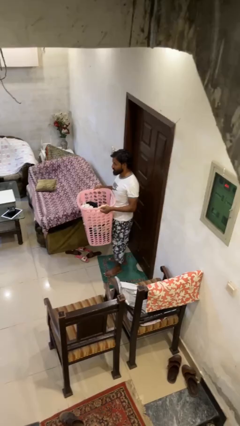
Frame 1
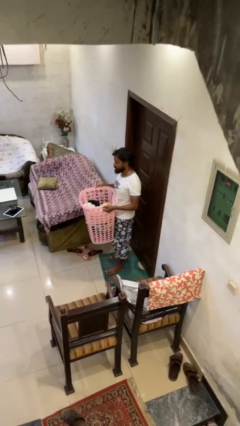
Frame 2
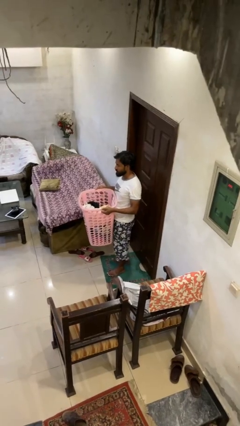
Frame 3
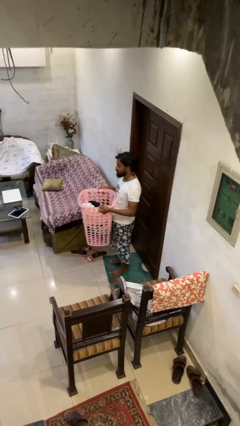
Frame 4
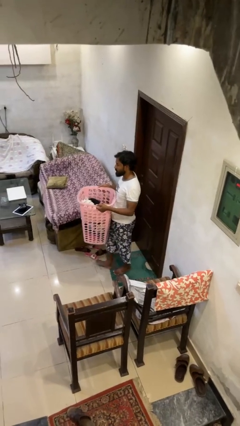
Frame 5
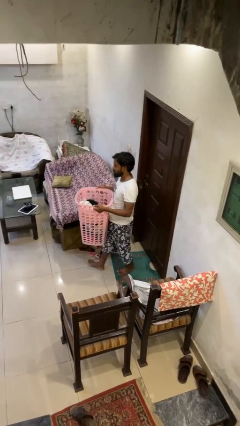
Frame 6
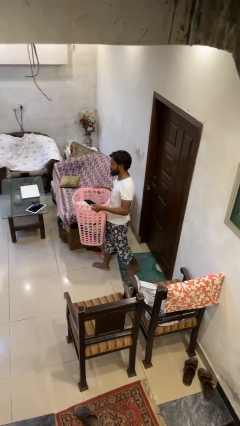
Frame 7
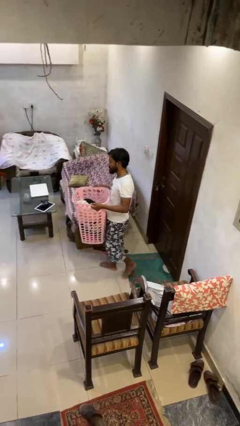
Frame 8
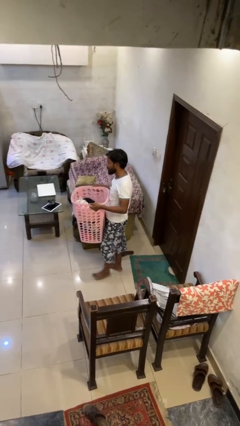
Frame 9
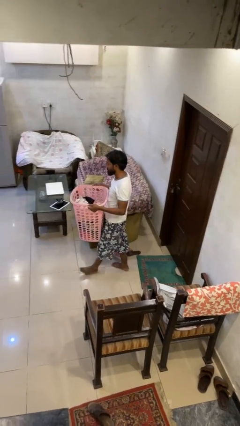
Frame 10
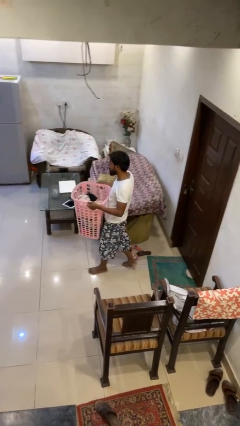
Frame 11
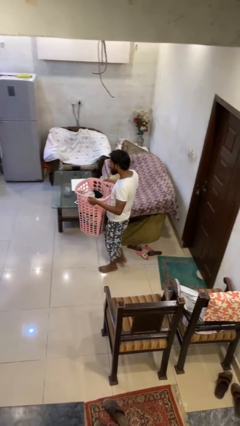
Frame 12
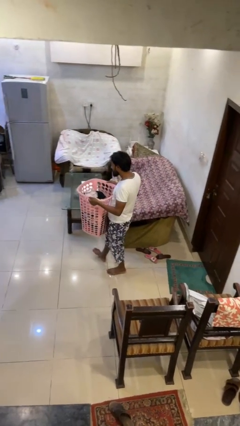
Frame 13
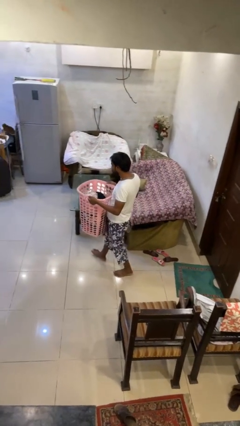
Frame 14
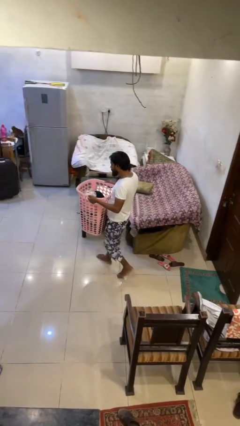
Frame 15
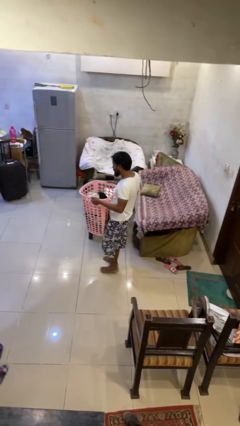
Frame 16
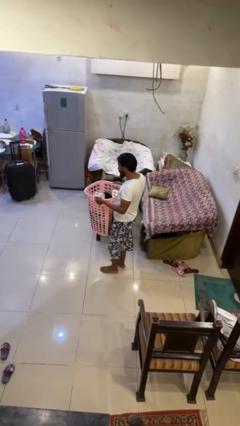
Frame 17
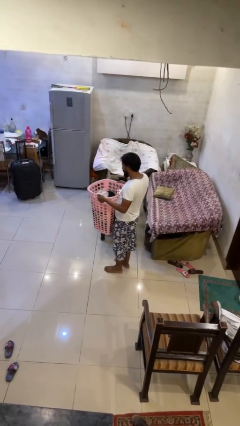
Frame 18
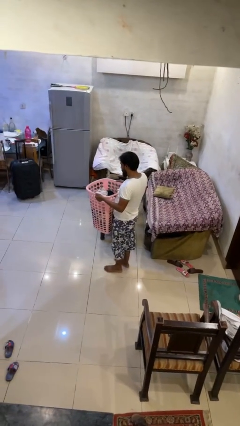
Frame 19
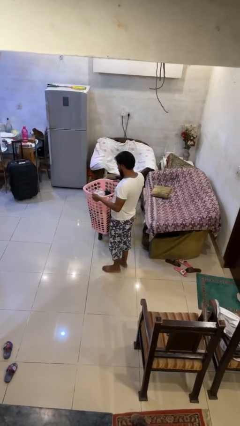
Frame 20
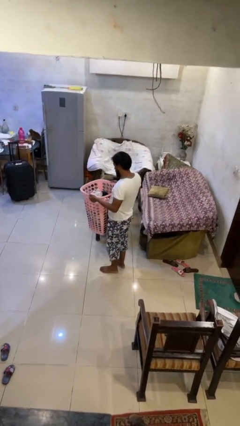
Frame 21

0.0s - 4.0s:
person carries laundry basket

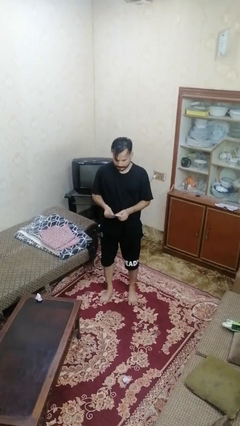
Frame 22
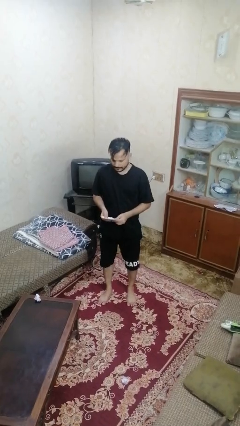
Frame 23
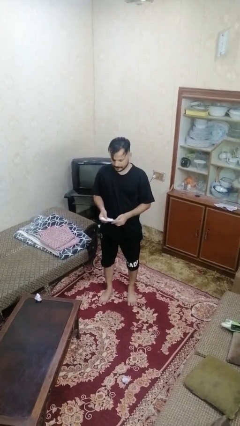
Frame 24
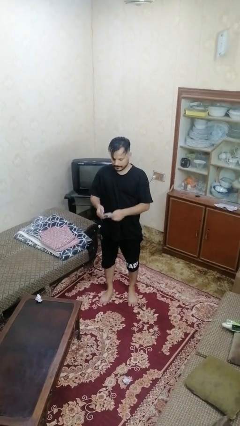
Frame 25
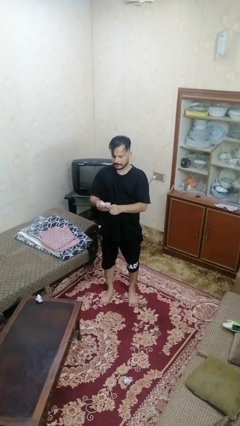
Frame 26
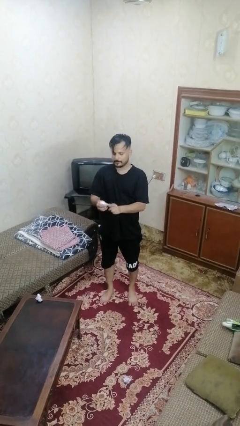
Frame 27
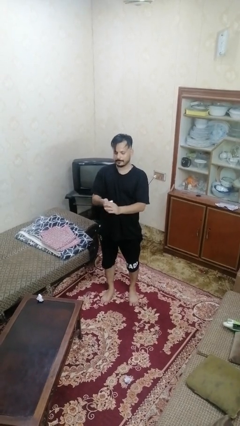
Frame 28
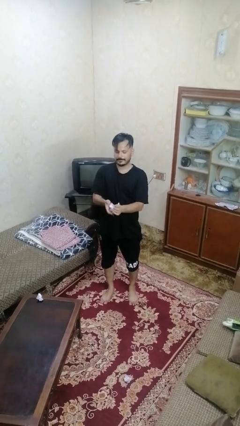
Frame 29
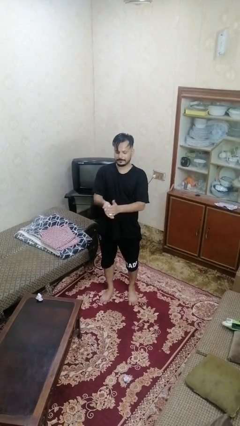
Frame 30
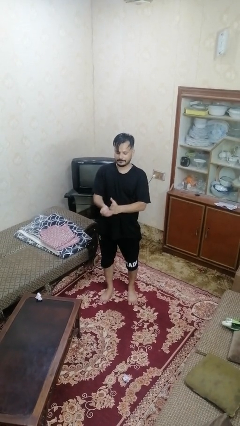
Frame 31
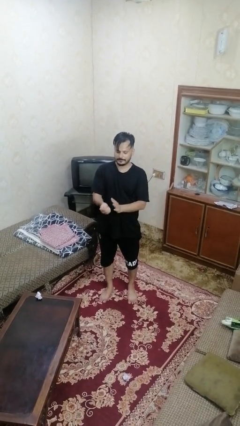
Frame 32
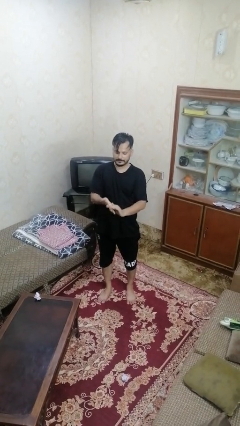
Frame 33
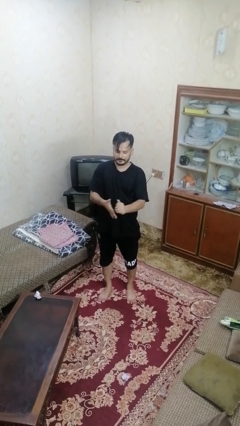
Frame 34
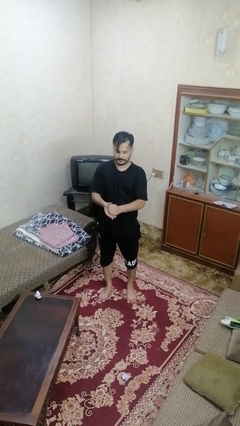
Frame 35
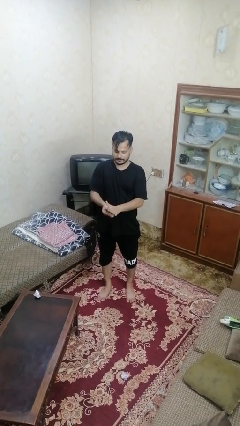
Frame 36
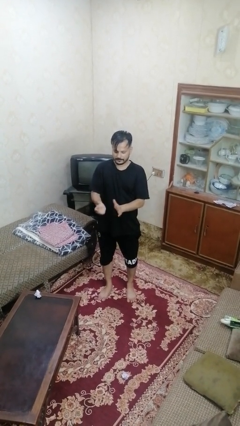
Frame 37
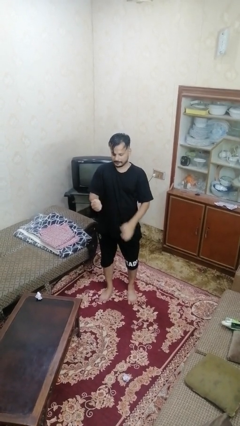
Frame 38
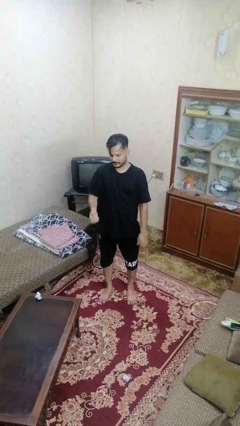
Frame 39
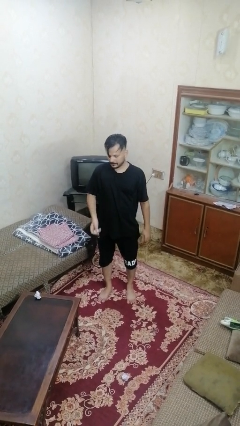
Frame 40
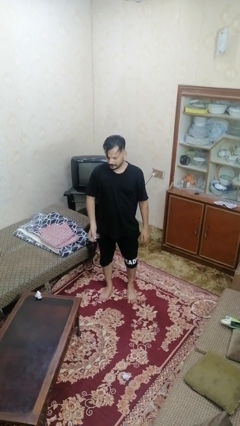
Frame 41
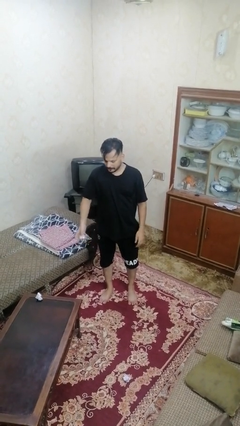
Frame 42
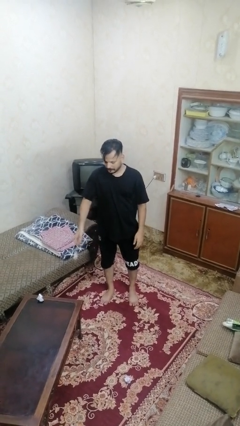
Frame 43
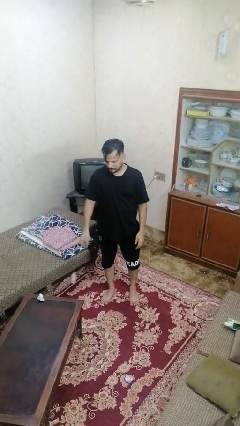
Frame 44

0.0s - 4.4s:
person crumples paper

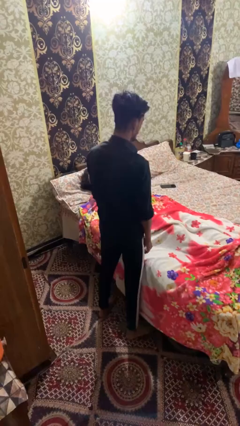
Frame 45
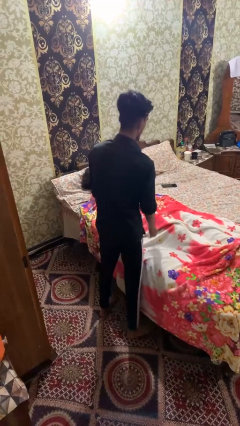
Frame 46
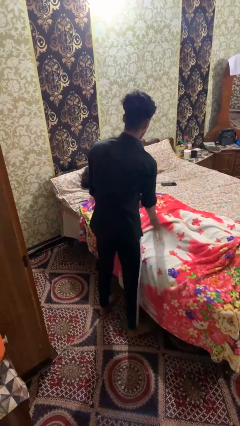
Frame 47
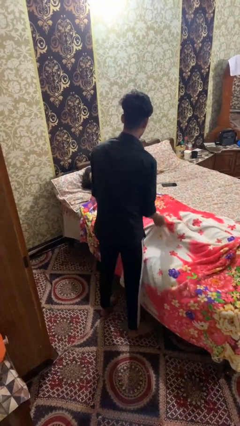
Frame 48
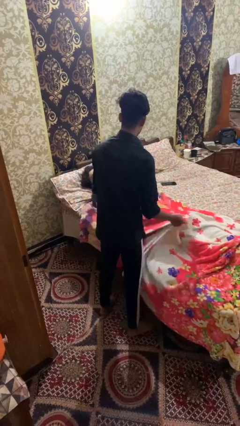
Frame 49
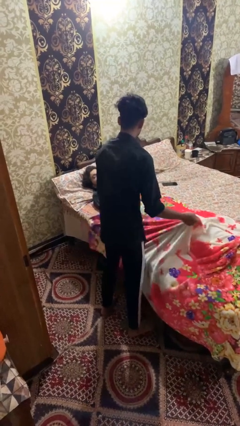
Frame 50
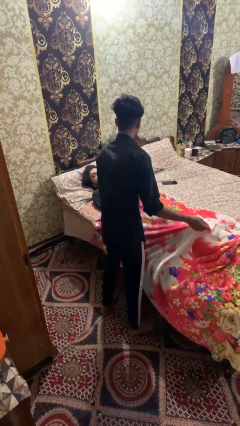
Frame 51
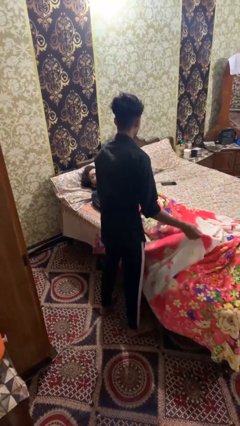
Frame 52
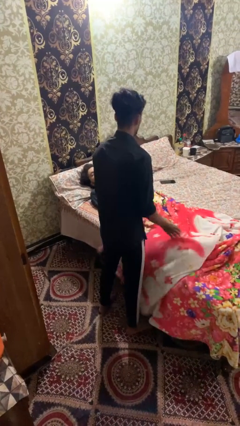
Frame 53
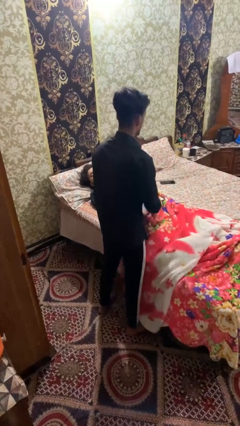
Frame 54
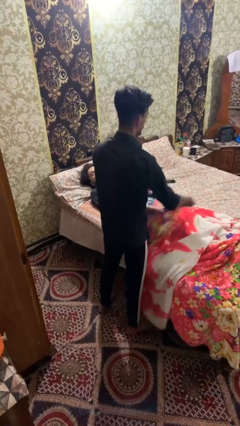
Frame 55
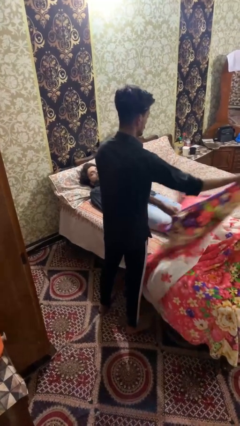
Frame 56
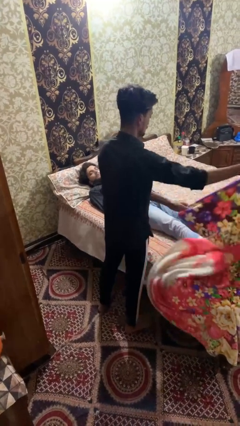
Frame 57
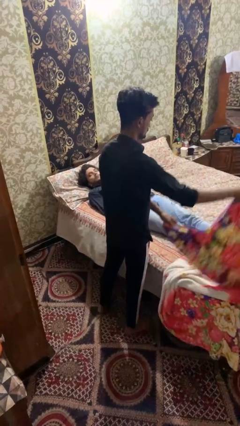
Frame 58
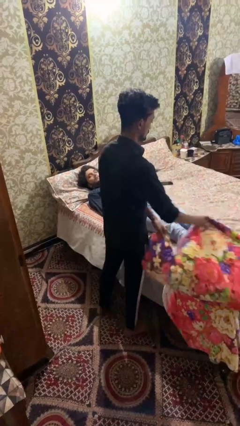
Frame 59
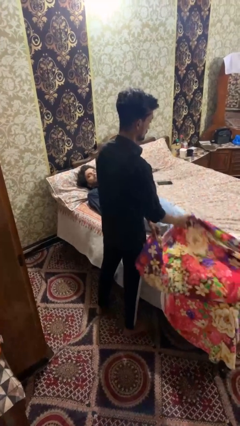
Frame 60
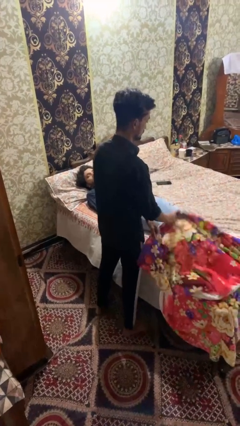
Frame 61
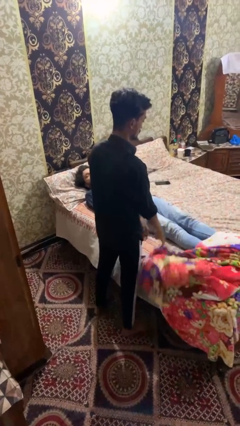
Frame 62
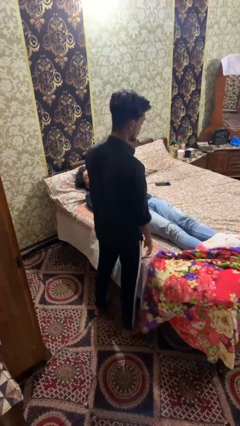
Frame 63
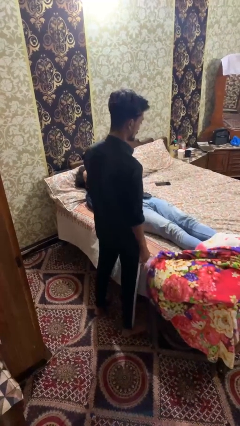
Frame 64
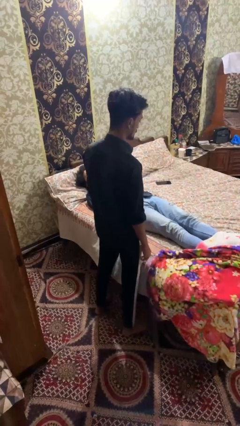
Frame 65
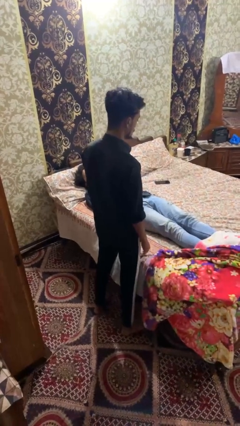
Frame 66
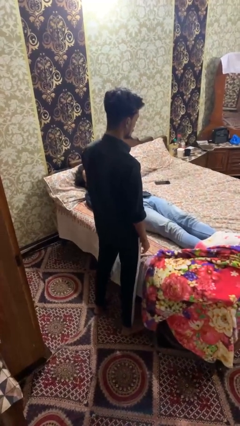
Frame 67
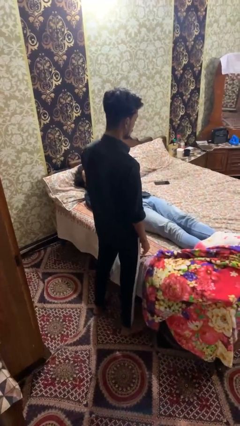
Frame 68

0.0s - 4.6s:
person uncovers friend with blanket

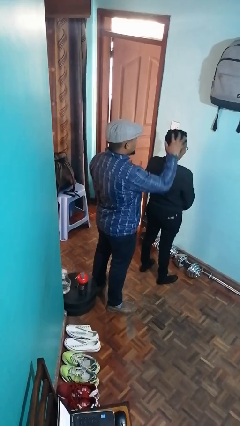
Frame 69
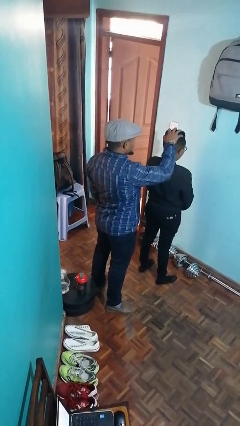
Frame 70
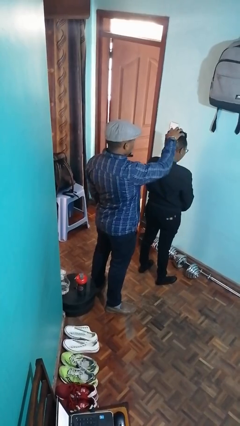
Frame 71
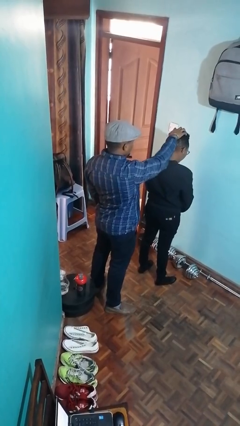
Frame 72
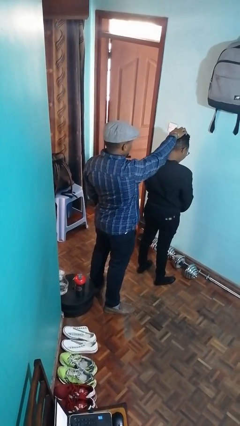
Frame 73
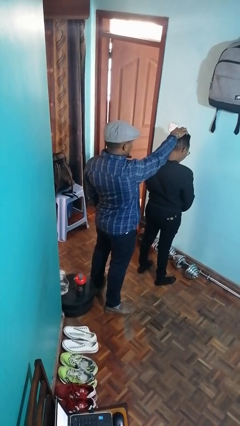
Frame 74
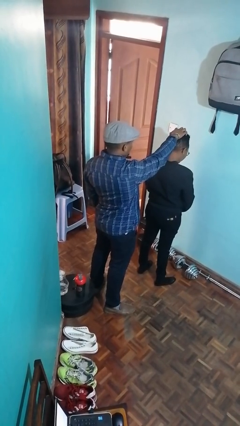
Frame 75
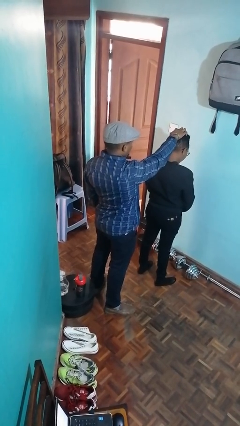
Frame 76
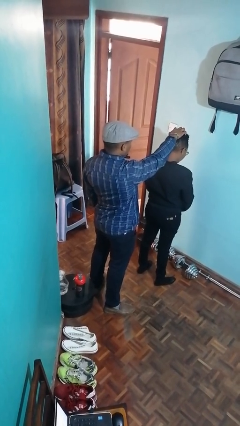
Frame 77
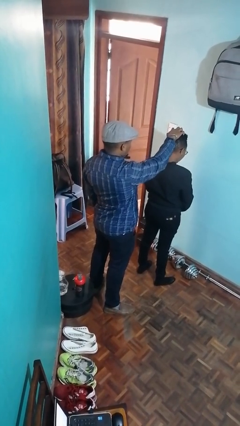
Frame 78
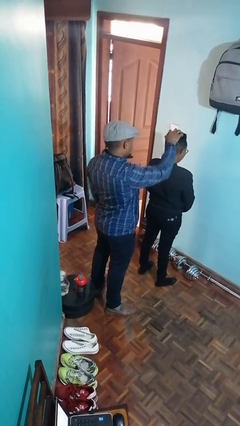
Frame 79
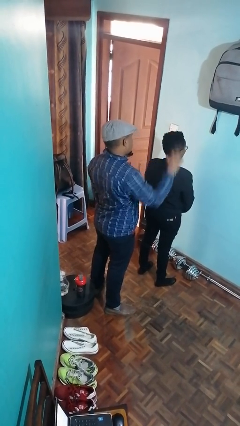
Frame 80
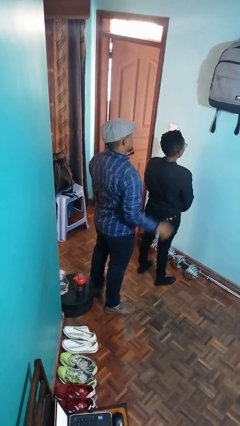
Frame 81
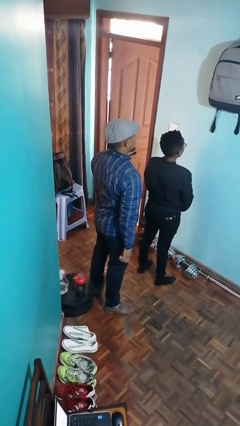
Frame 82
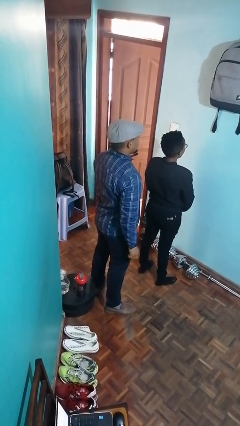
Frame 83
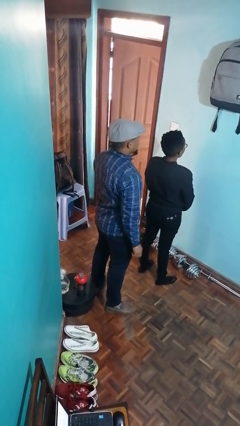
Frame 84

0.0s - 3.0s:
person grabs person by hair

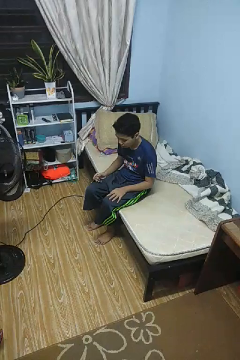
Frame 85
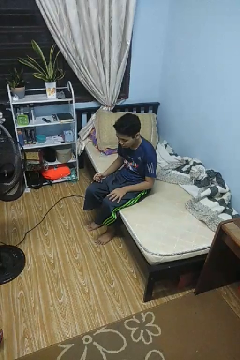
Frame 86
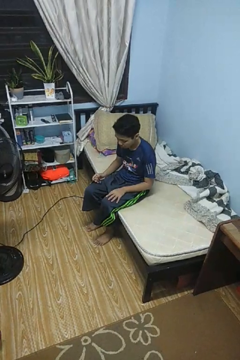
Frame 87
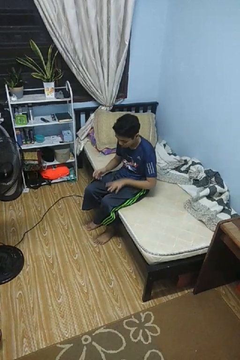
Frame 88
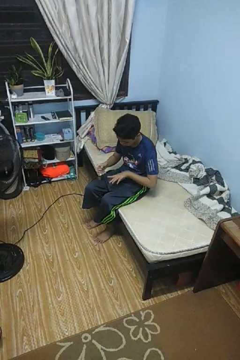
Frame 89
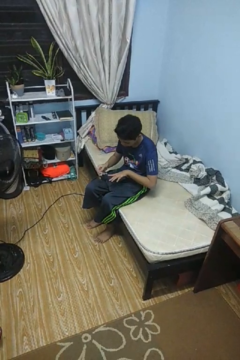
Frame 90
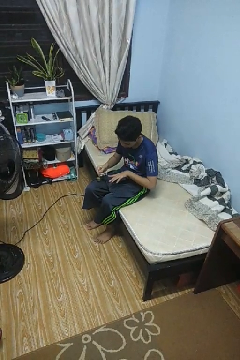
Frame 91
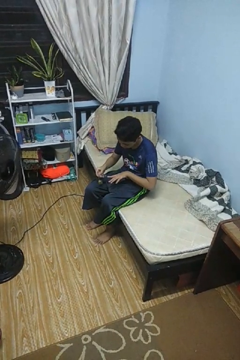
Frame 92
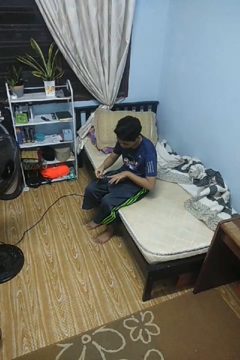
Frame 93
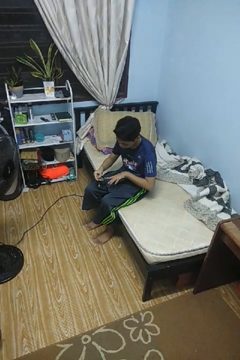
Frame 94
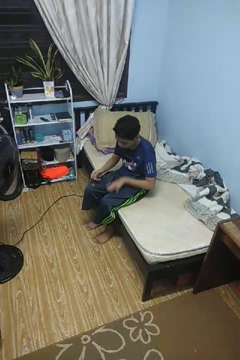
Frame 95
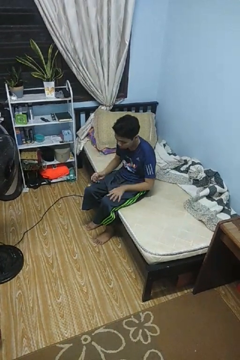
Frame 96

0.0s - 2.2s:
person clips fingernails
